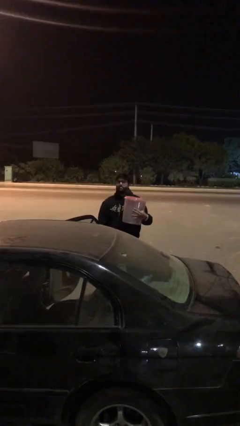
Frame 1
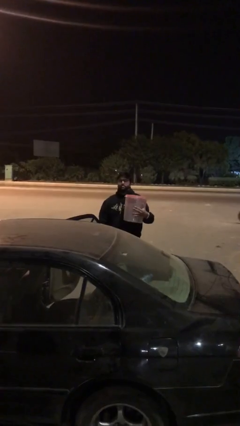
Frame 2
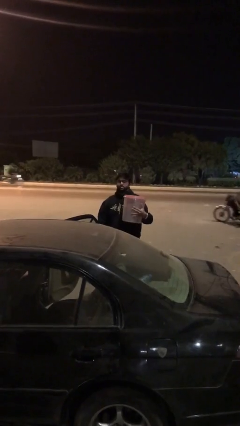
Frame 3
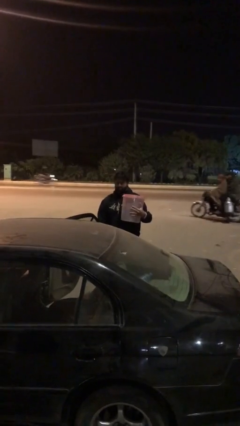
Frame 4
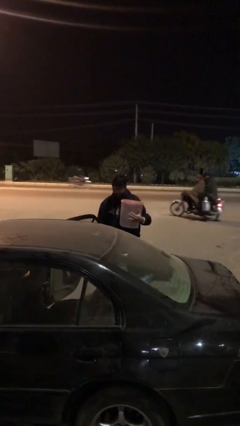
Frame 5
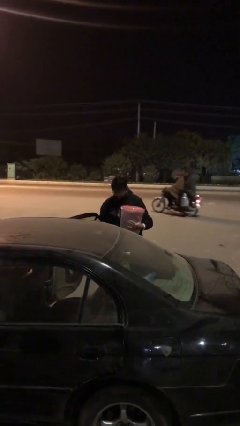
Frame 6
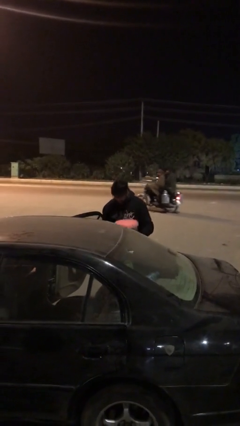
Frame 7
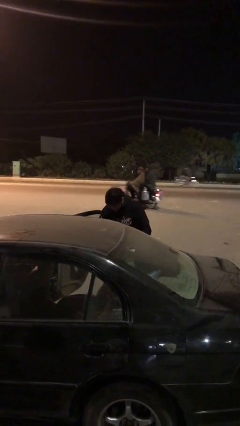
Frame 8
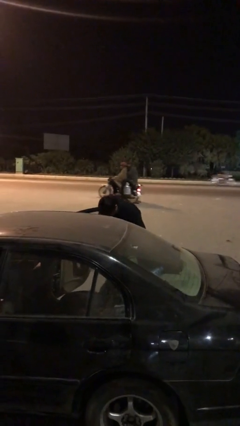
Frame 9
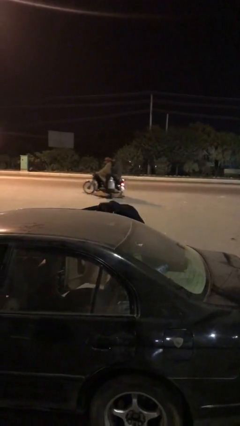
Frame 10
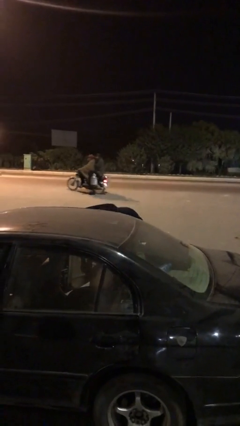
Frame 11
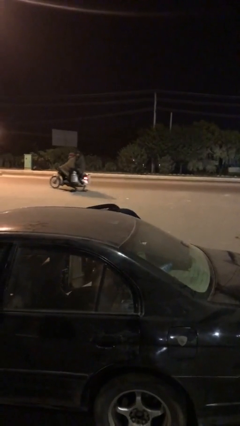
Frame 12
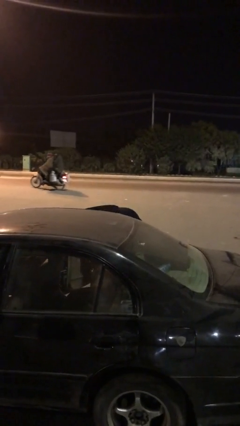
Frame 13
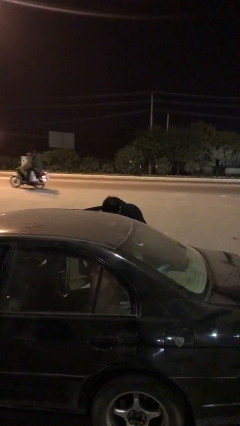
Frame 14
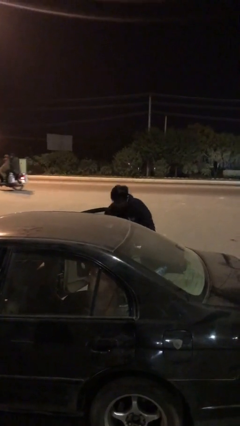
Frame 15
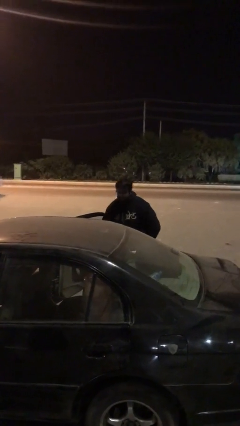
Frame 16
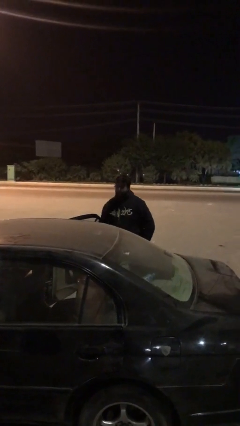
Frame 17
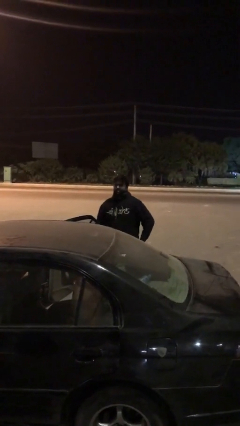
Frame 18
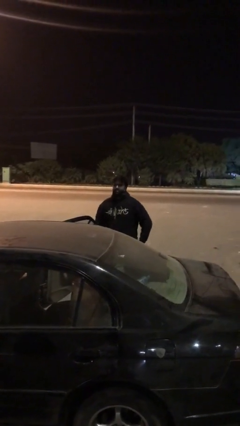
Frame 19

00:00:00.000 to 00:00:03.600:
person loads car

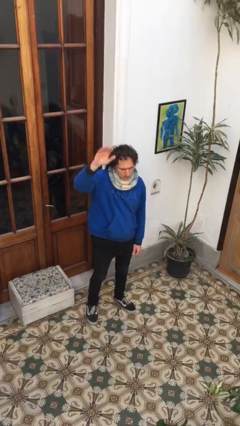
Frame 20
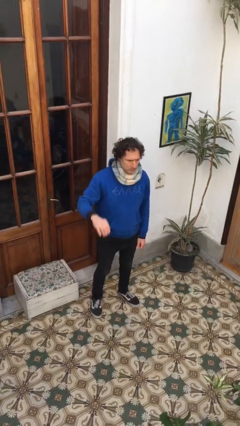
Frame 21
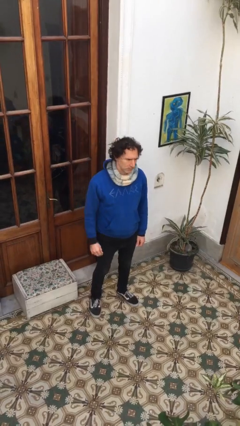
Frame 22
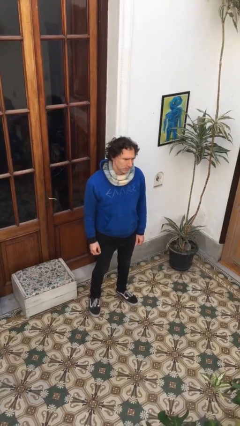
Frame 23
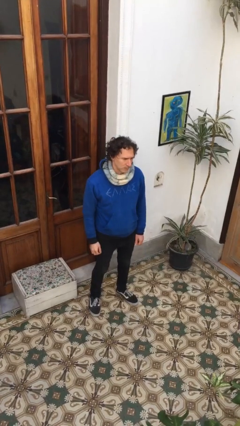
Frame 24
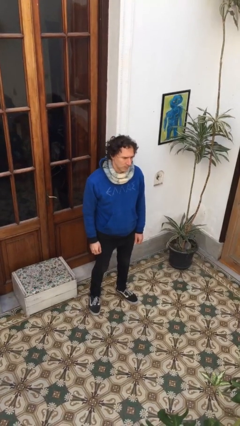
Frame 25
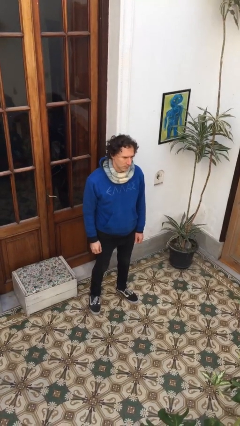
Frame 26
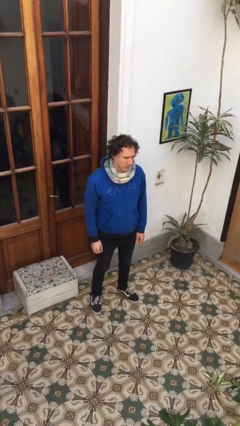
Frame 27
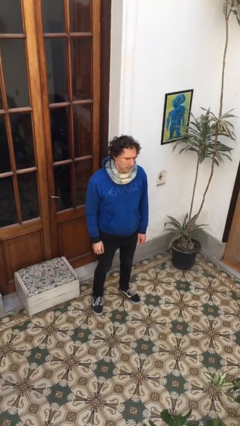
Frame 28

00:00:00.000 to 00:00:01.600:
person gestures lower hand

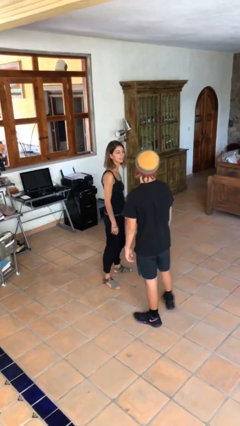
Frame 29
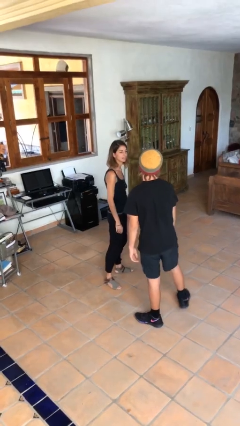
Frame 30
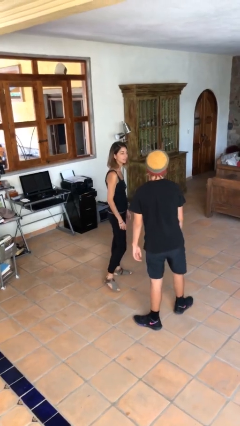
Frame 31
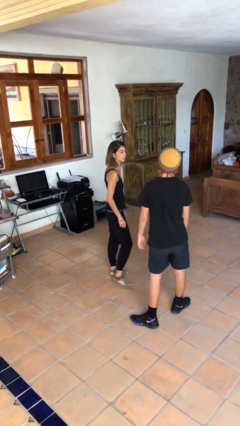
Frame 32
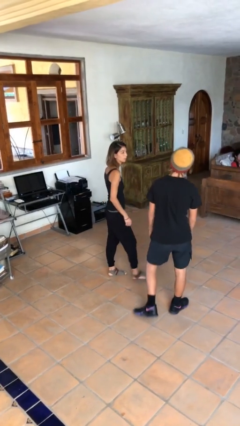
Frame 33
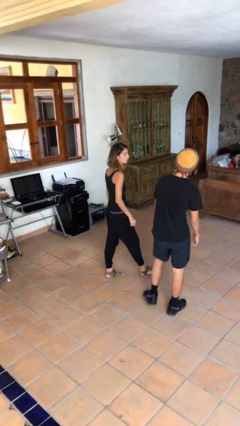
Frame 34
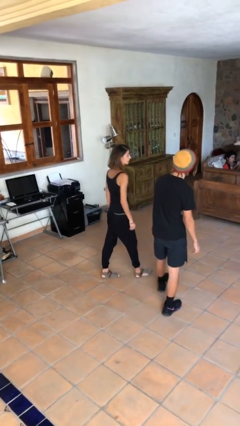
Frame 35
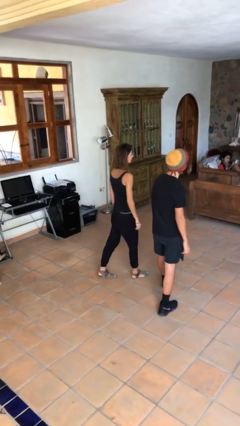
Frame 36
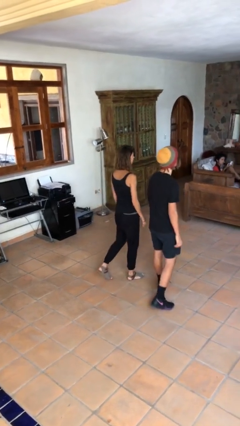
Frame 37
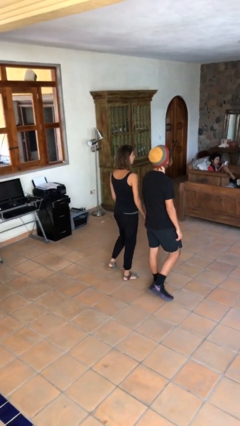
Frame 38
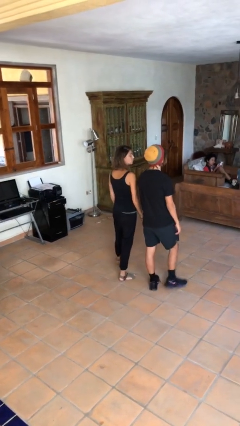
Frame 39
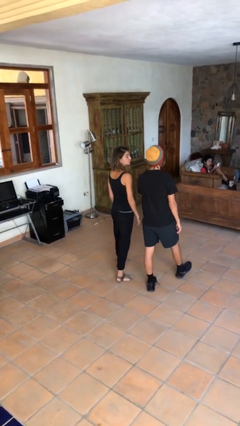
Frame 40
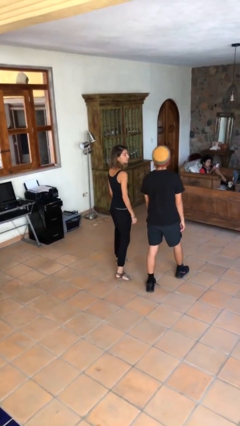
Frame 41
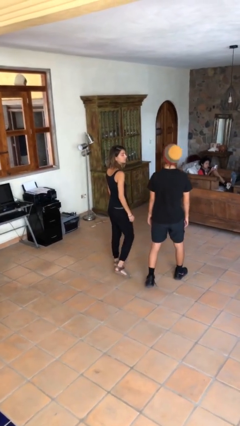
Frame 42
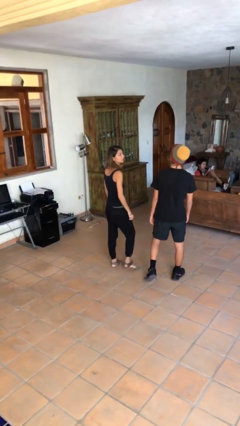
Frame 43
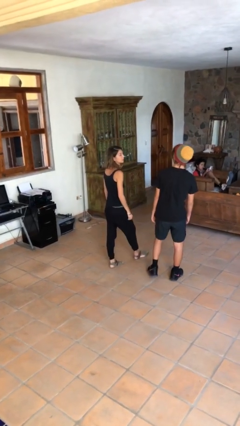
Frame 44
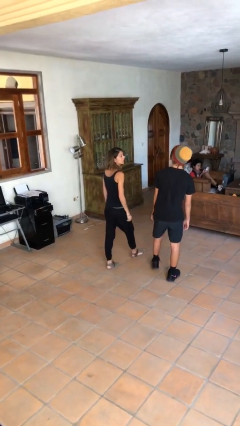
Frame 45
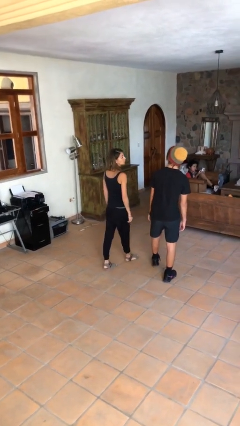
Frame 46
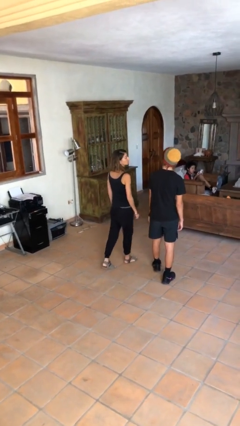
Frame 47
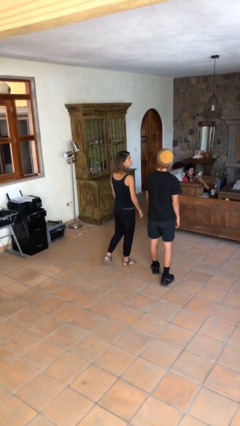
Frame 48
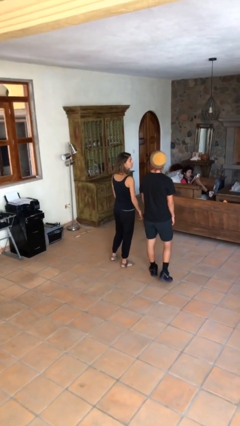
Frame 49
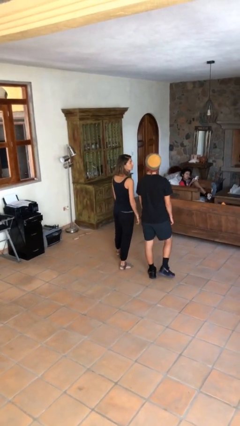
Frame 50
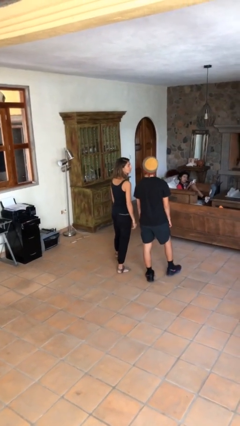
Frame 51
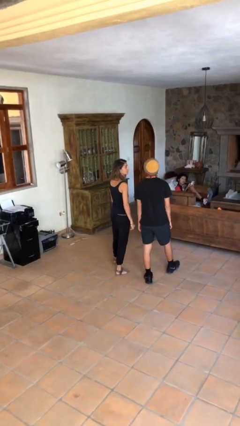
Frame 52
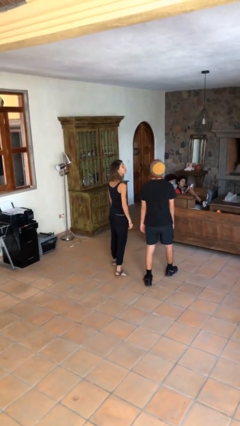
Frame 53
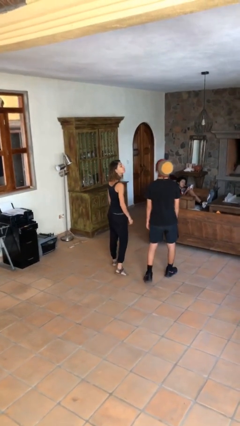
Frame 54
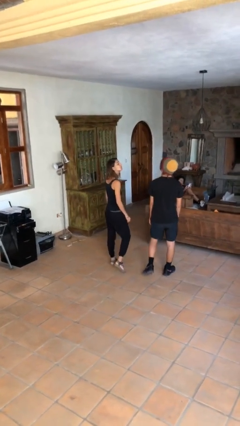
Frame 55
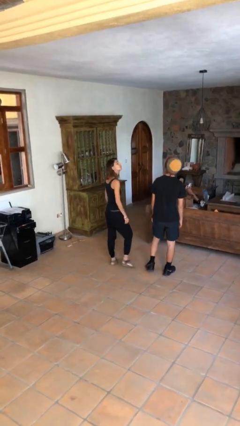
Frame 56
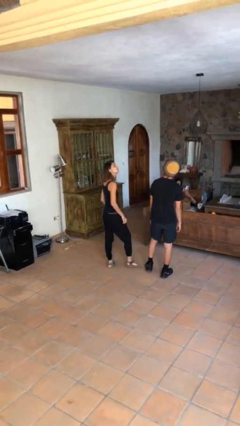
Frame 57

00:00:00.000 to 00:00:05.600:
person talks to person

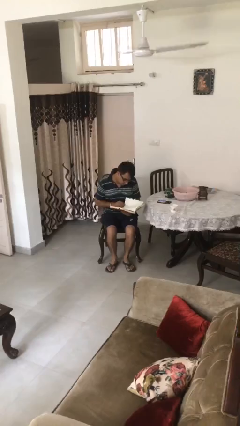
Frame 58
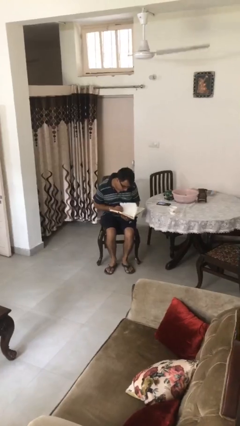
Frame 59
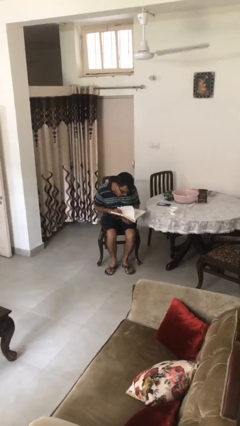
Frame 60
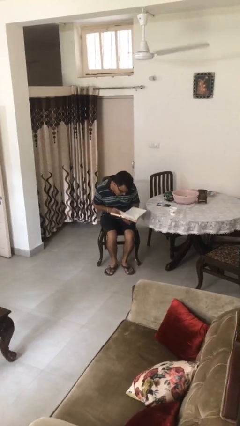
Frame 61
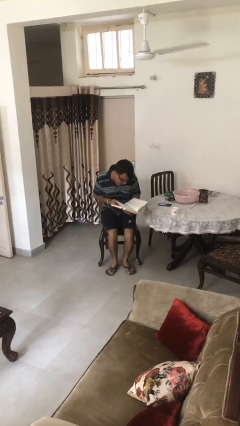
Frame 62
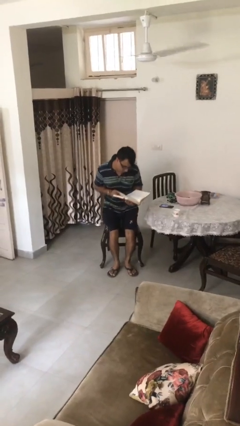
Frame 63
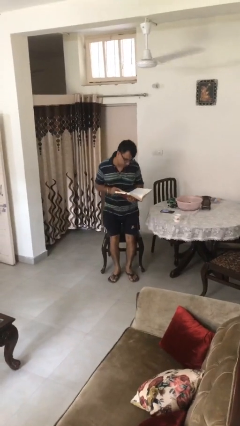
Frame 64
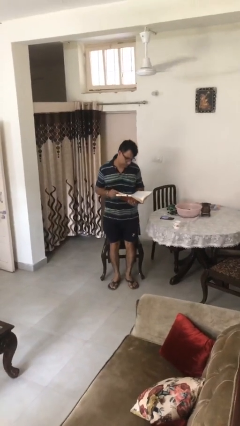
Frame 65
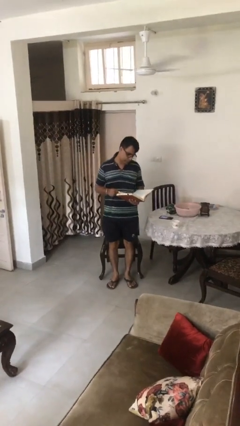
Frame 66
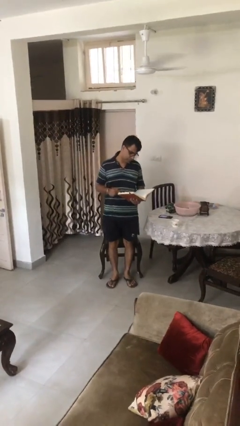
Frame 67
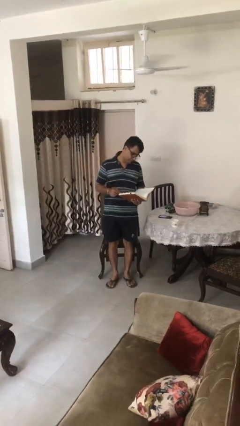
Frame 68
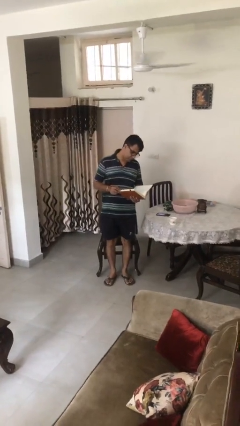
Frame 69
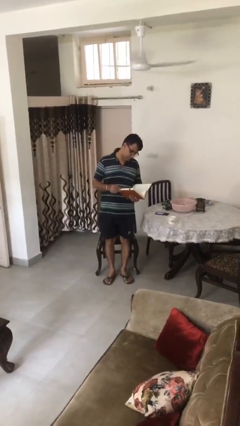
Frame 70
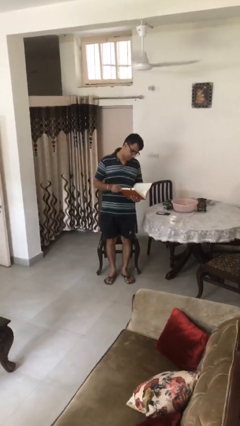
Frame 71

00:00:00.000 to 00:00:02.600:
person stands up

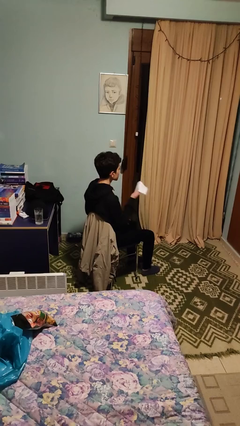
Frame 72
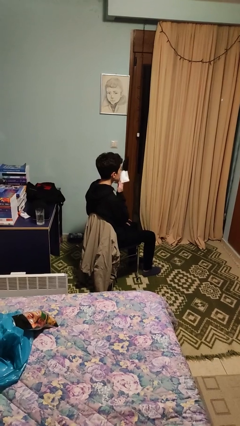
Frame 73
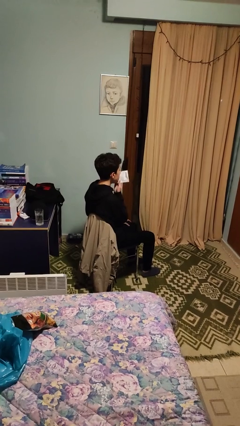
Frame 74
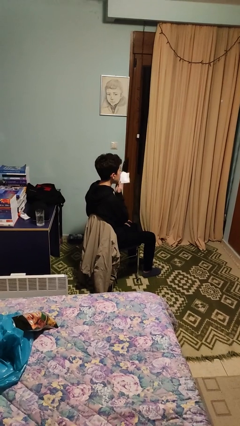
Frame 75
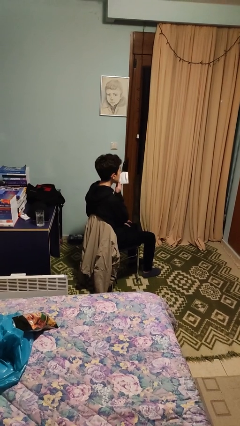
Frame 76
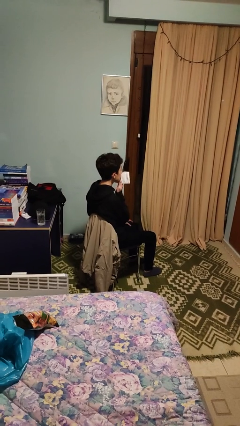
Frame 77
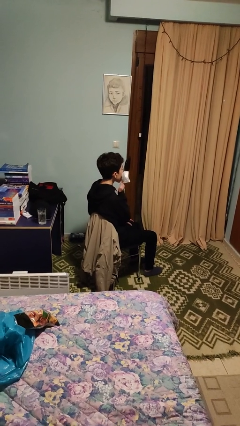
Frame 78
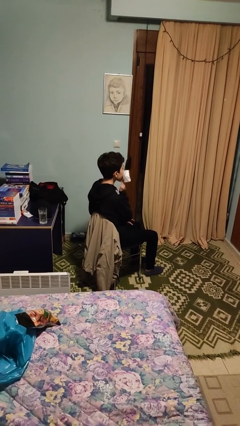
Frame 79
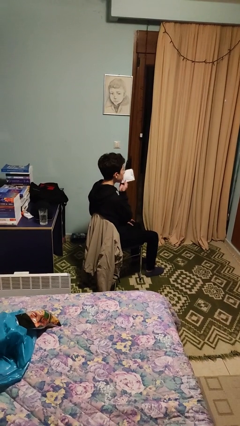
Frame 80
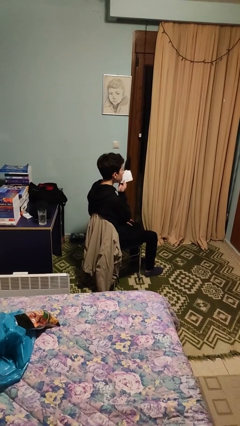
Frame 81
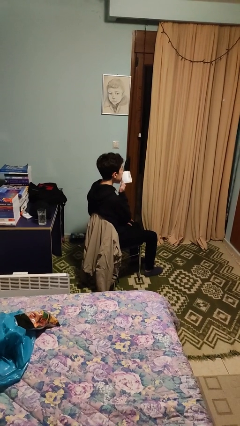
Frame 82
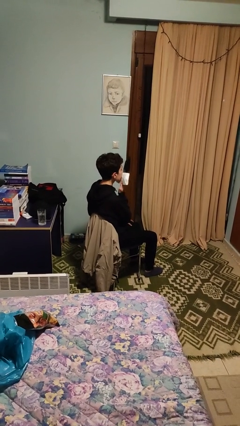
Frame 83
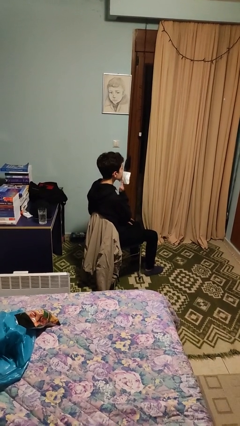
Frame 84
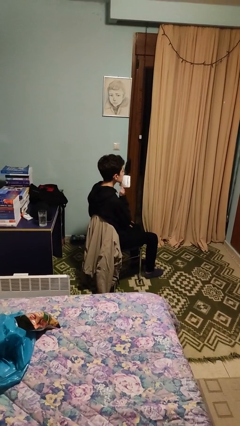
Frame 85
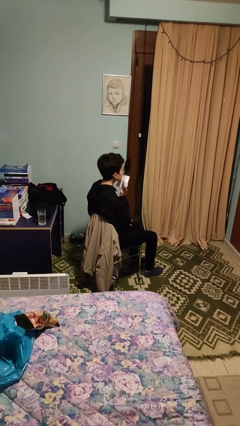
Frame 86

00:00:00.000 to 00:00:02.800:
person wipes mouth with napkin

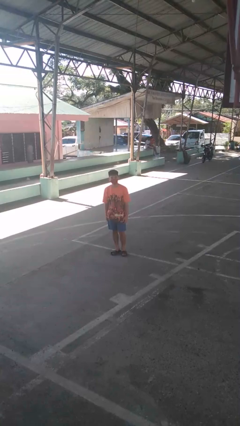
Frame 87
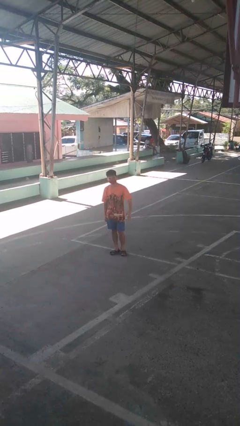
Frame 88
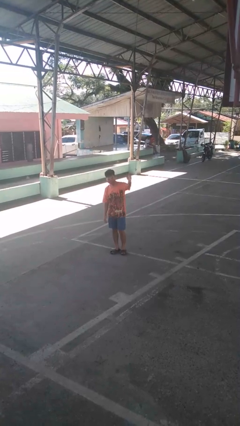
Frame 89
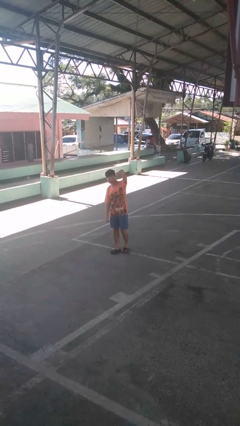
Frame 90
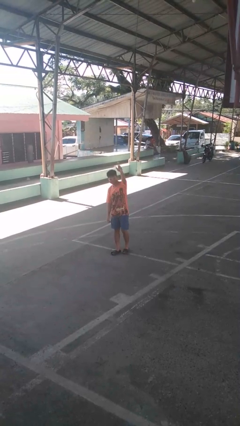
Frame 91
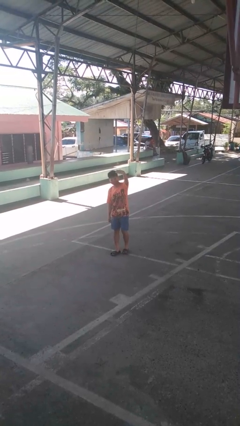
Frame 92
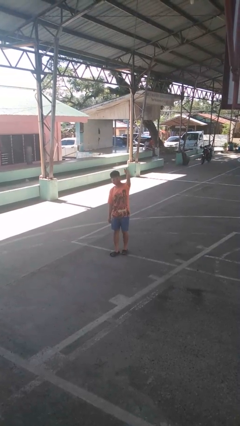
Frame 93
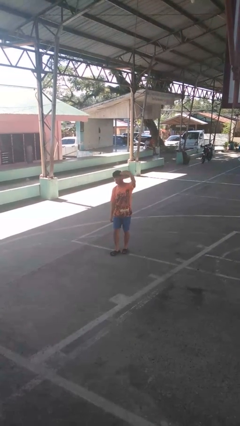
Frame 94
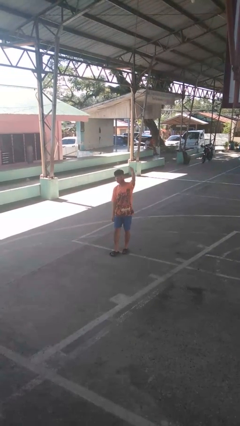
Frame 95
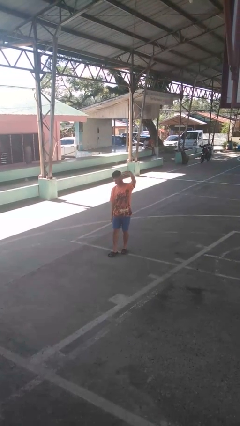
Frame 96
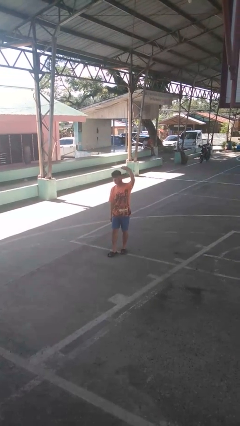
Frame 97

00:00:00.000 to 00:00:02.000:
person gestures come here
